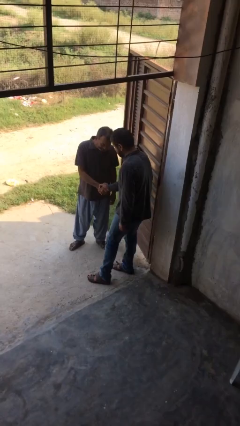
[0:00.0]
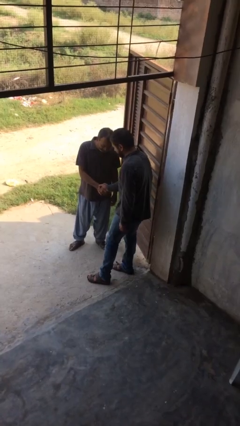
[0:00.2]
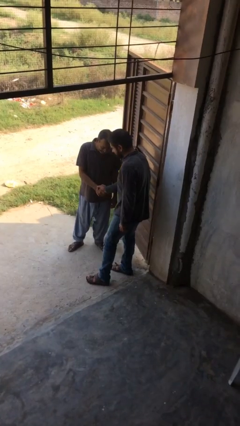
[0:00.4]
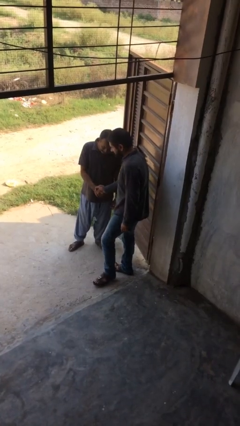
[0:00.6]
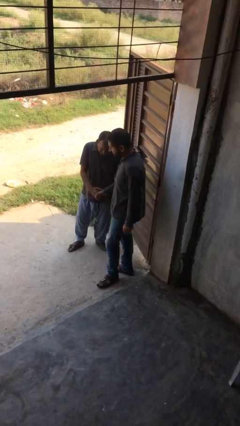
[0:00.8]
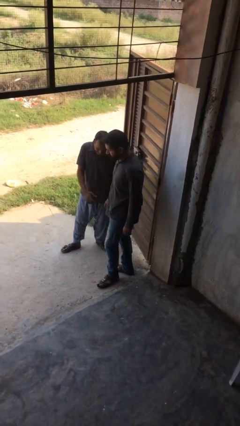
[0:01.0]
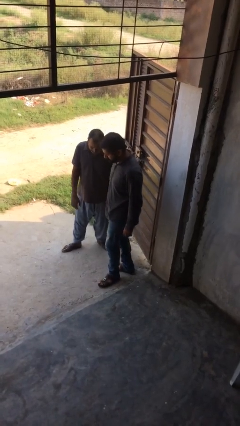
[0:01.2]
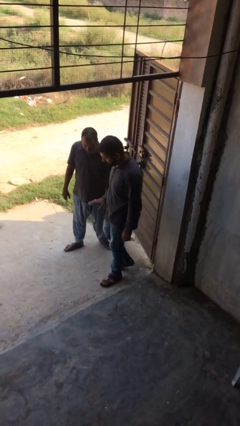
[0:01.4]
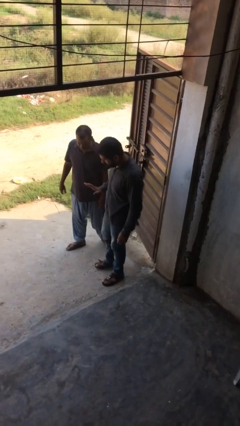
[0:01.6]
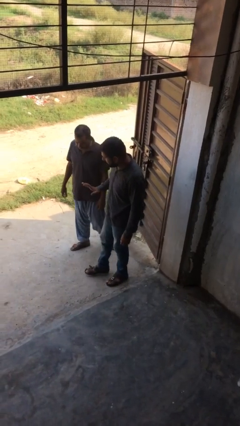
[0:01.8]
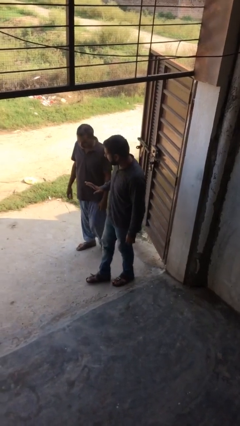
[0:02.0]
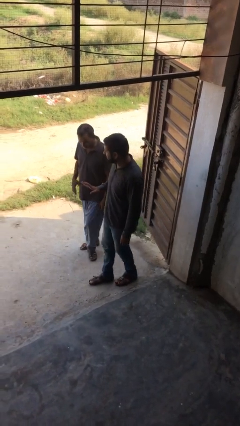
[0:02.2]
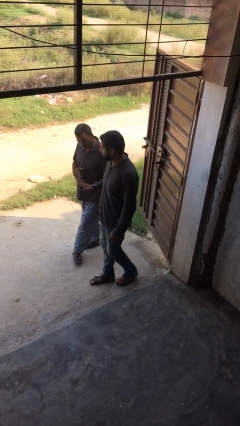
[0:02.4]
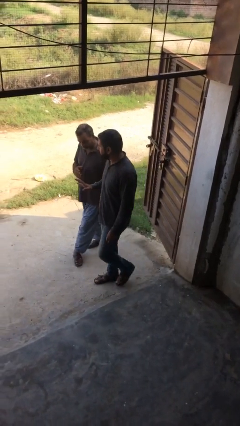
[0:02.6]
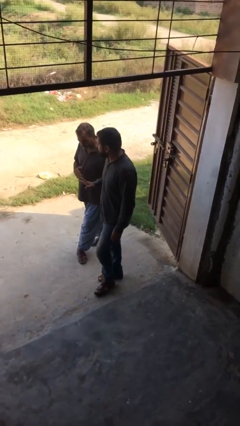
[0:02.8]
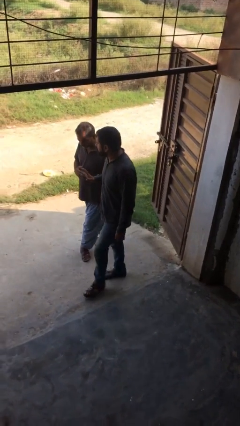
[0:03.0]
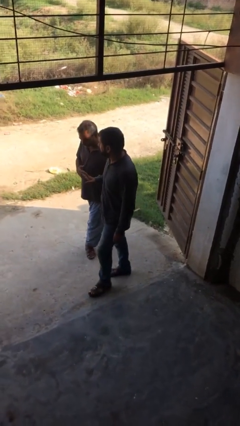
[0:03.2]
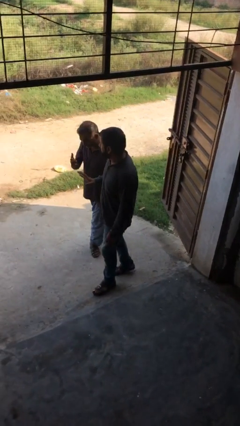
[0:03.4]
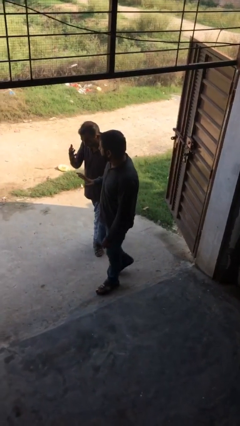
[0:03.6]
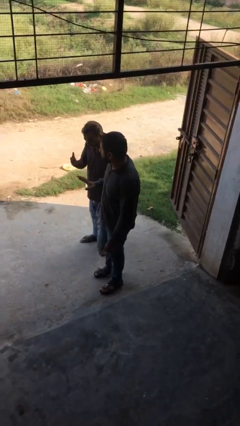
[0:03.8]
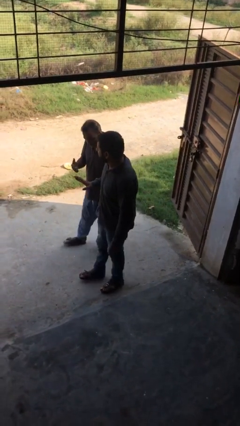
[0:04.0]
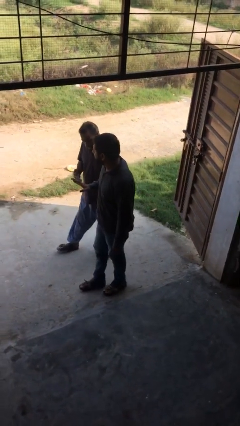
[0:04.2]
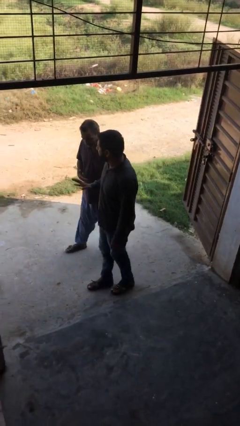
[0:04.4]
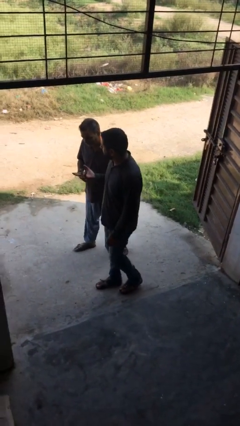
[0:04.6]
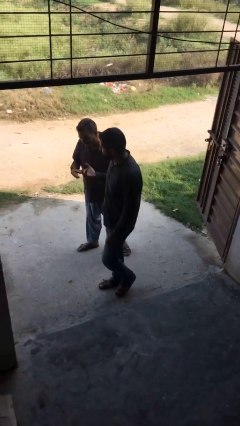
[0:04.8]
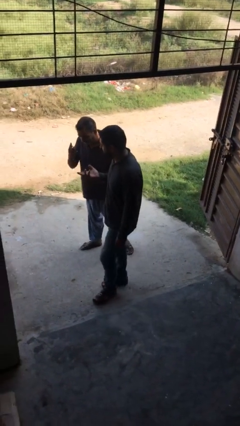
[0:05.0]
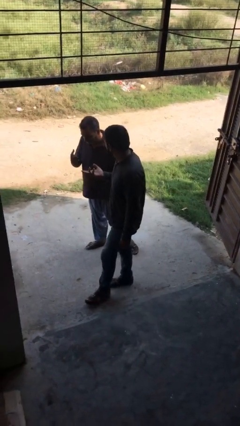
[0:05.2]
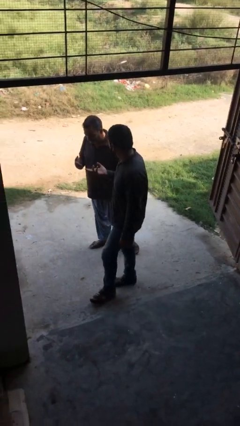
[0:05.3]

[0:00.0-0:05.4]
person talks to person

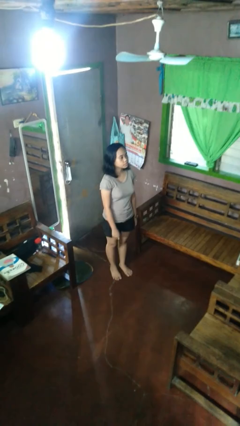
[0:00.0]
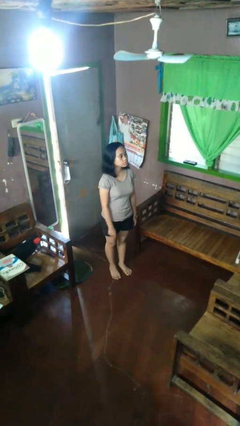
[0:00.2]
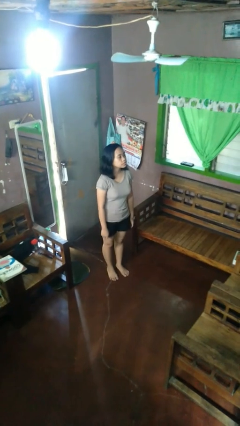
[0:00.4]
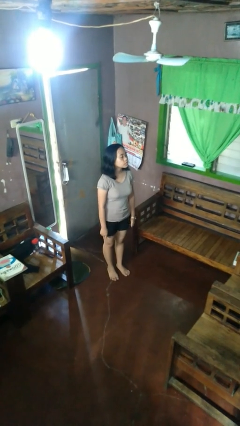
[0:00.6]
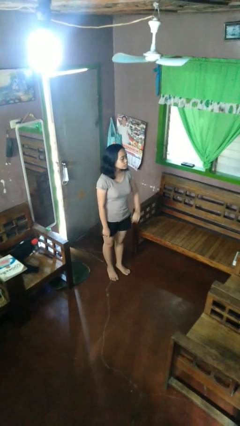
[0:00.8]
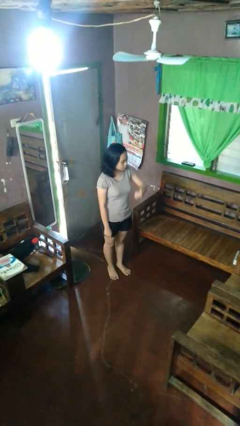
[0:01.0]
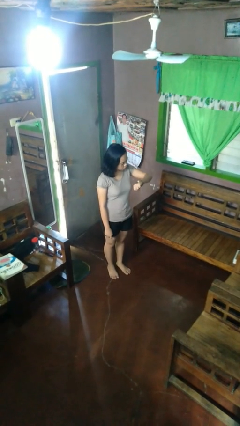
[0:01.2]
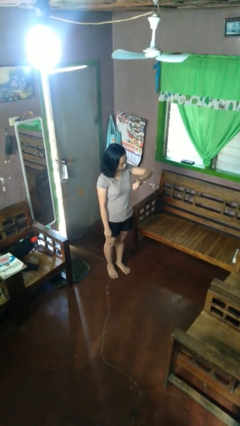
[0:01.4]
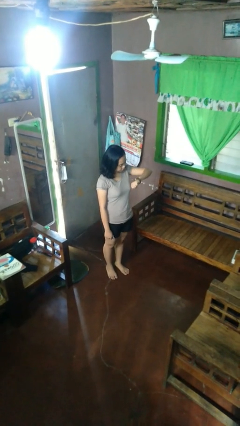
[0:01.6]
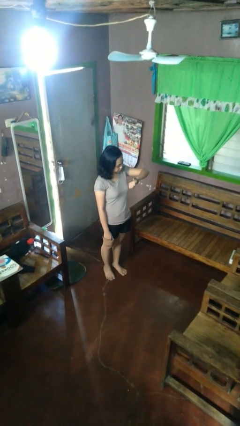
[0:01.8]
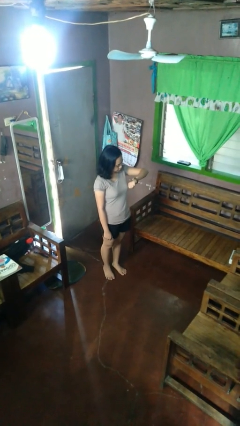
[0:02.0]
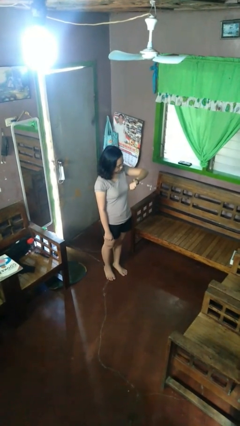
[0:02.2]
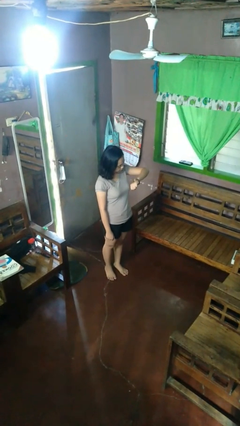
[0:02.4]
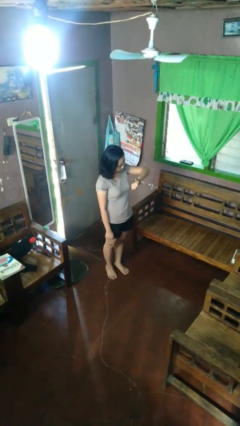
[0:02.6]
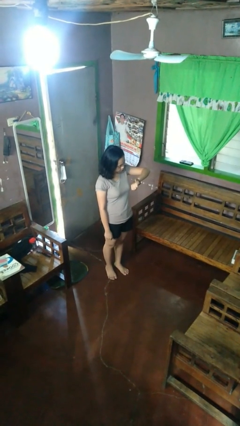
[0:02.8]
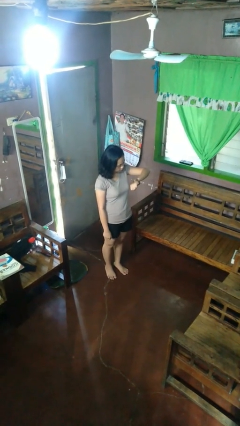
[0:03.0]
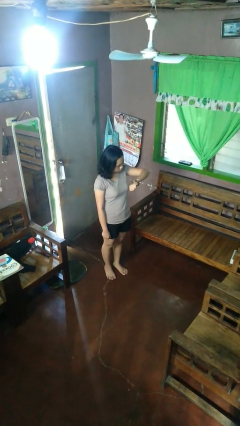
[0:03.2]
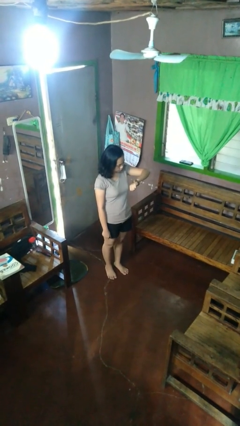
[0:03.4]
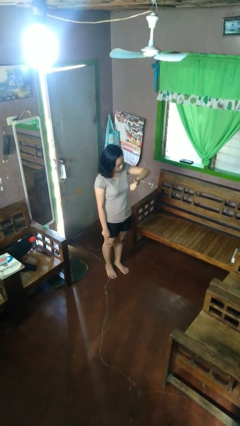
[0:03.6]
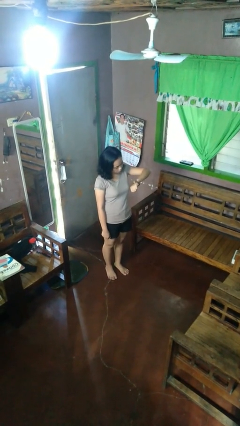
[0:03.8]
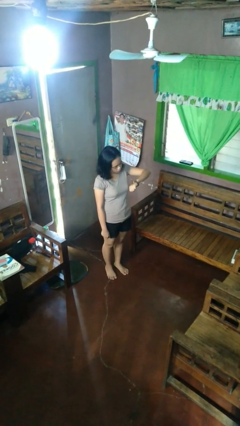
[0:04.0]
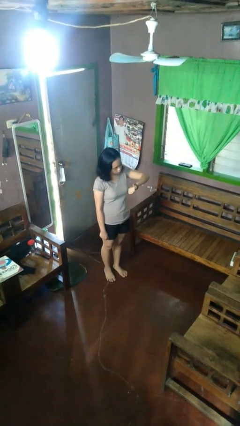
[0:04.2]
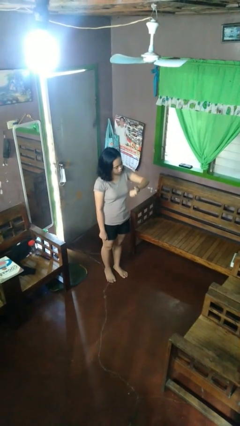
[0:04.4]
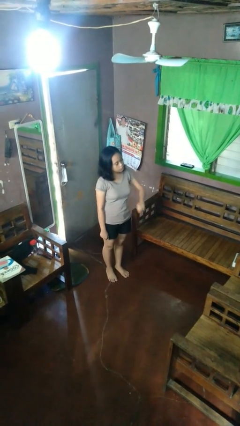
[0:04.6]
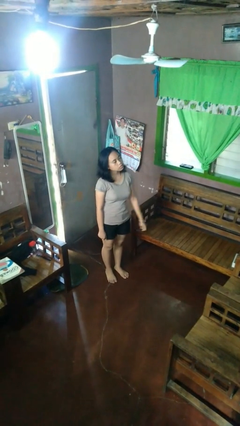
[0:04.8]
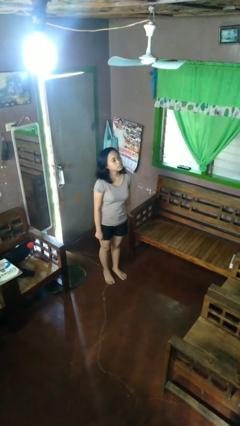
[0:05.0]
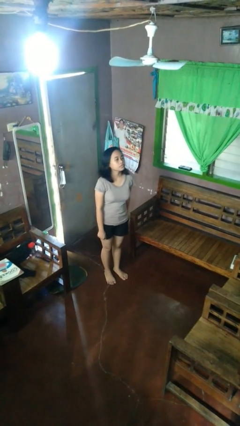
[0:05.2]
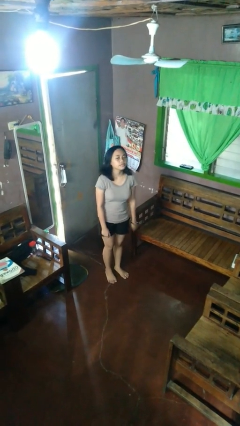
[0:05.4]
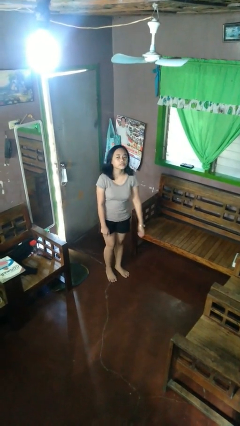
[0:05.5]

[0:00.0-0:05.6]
person looks at wristwatch

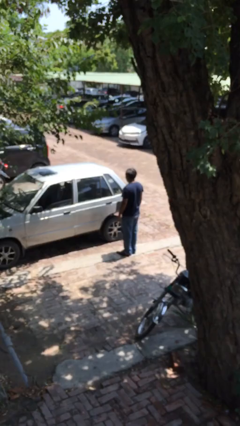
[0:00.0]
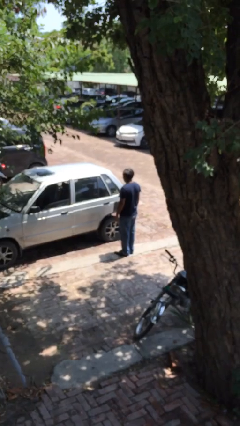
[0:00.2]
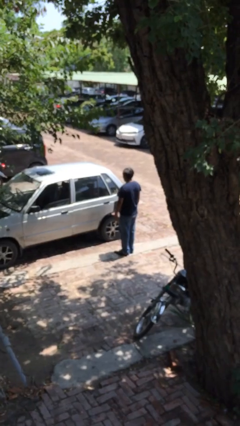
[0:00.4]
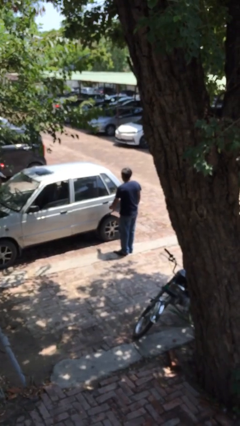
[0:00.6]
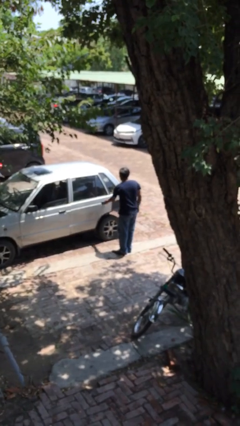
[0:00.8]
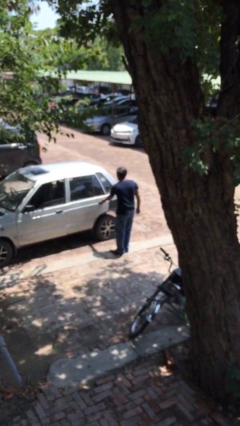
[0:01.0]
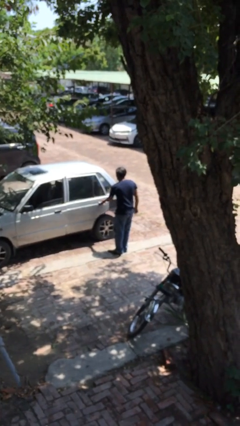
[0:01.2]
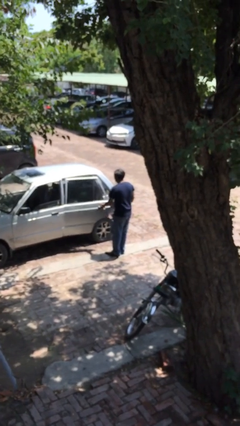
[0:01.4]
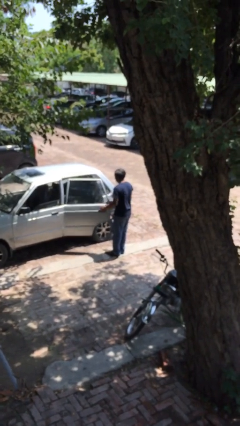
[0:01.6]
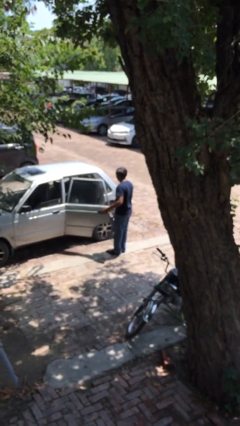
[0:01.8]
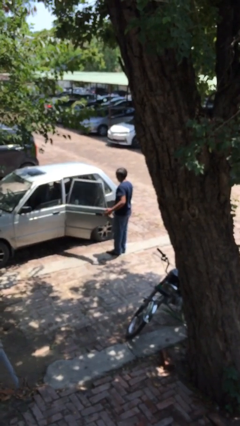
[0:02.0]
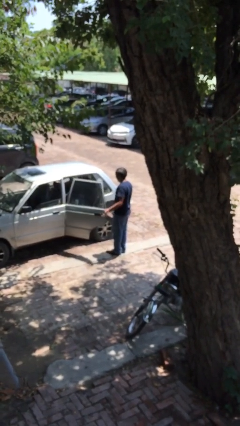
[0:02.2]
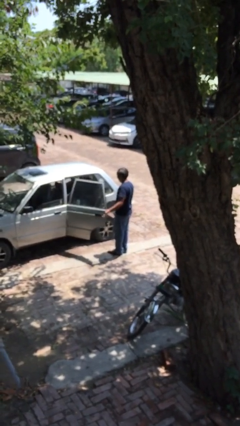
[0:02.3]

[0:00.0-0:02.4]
person opens car door

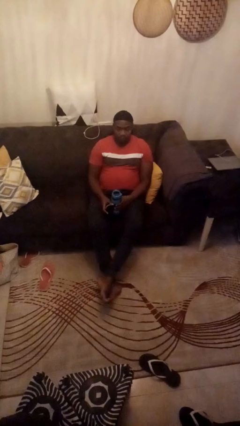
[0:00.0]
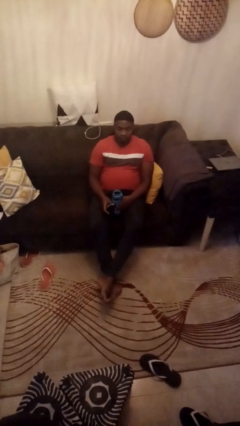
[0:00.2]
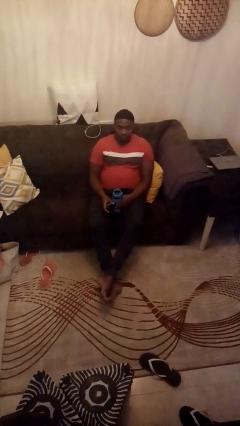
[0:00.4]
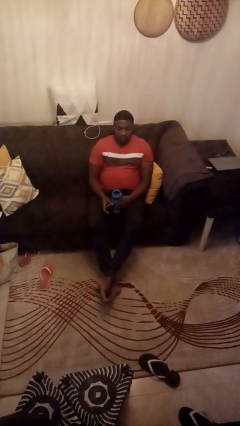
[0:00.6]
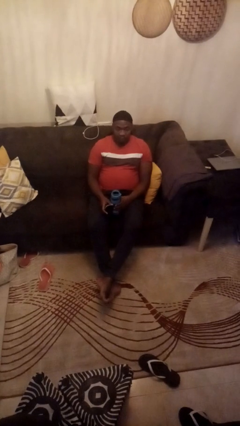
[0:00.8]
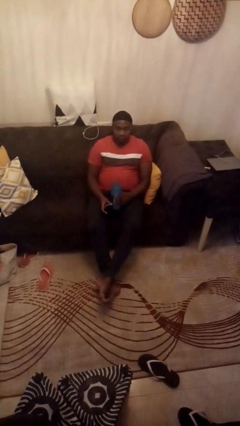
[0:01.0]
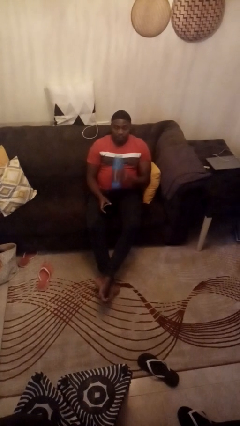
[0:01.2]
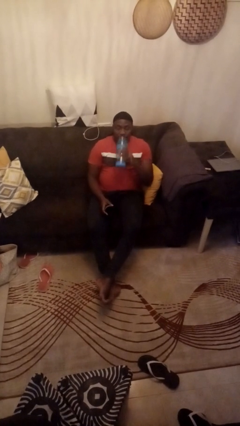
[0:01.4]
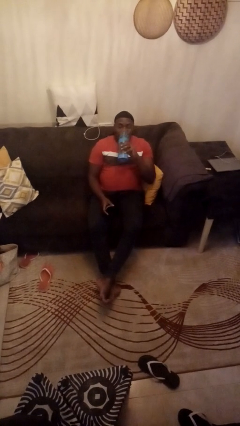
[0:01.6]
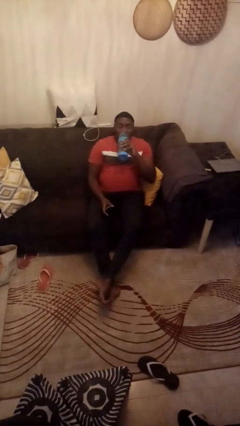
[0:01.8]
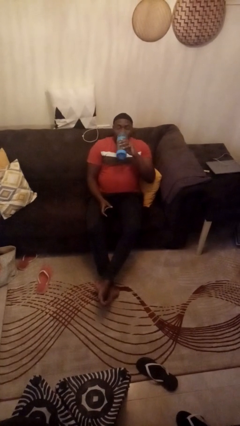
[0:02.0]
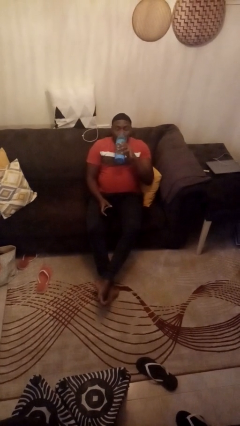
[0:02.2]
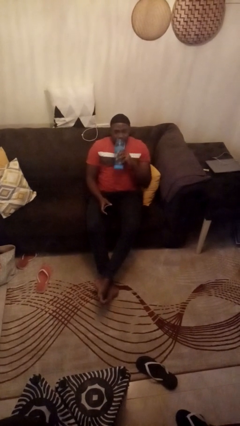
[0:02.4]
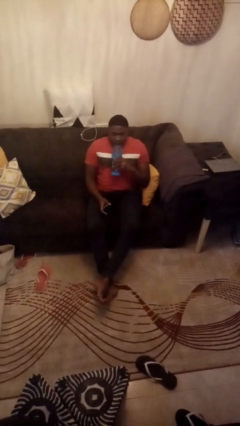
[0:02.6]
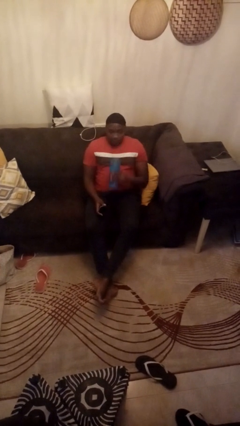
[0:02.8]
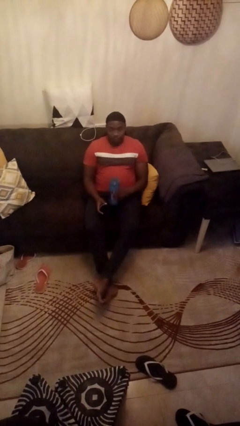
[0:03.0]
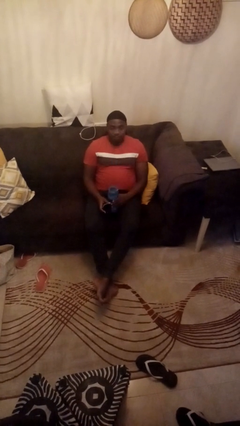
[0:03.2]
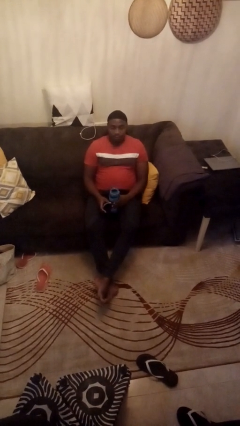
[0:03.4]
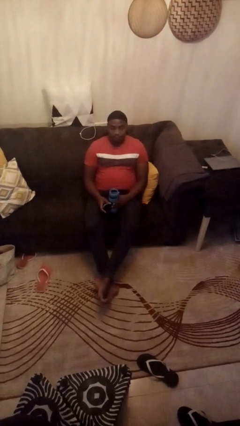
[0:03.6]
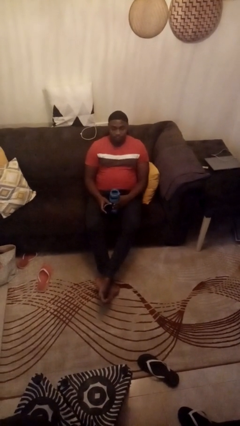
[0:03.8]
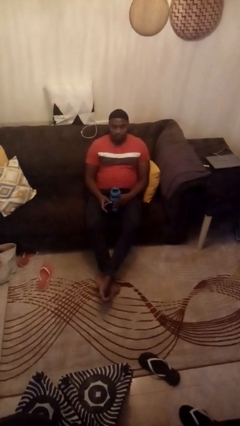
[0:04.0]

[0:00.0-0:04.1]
person drinks from bottle
